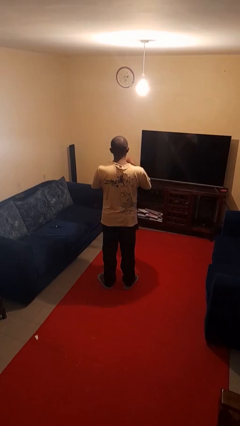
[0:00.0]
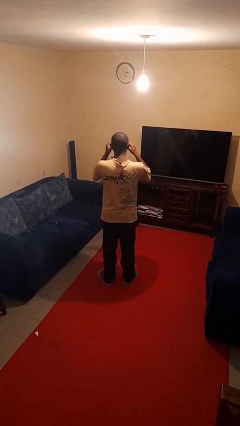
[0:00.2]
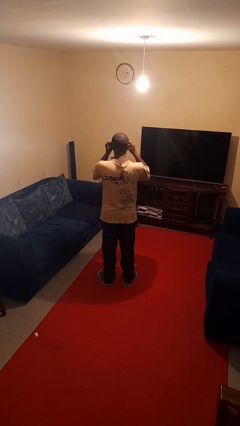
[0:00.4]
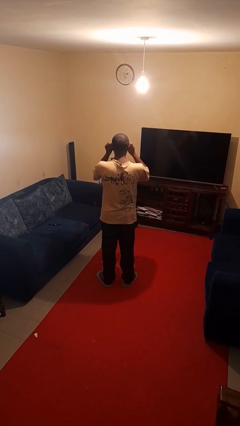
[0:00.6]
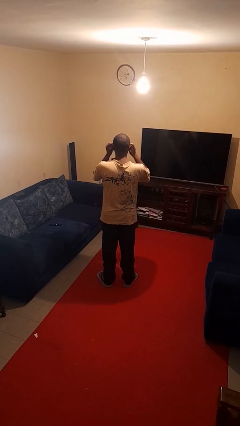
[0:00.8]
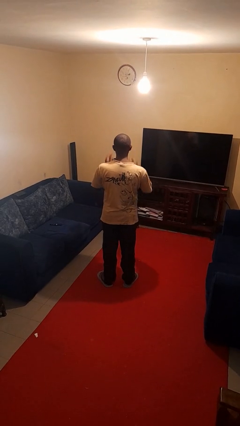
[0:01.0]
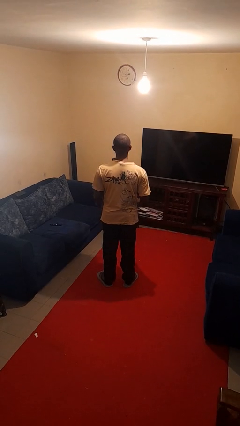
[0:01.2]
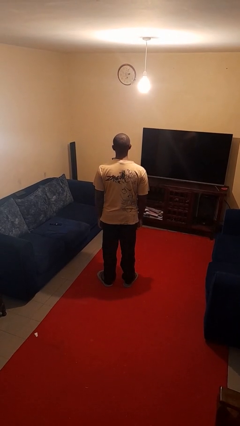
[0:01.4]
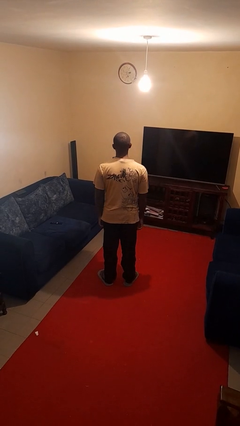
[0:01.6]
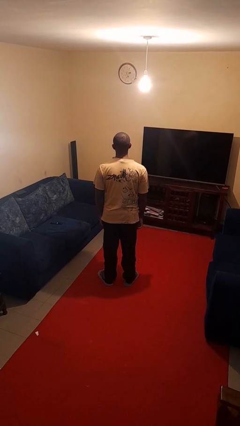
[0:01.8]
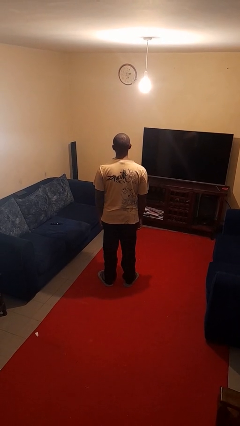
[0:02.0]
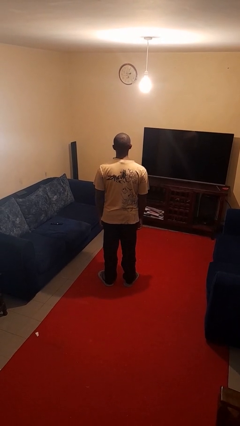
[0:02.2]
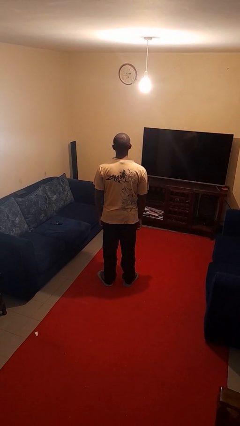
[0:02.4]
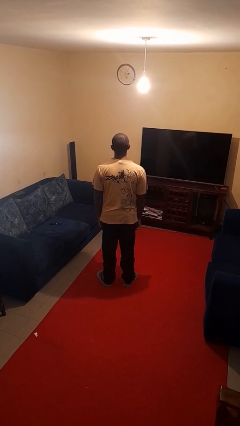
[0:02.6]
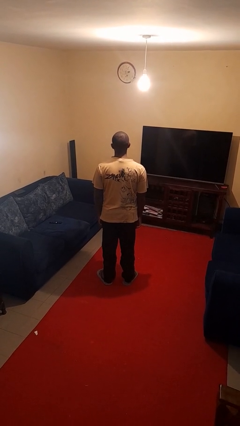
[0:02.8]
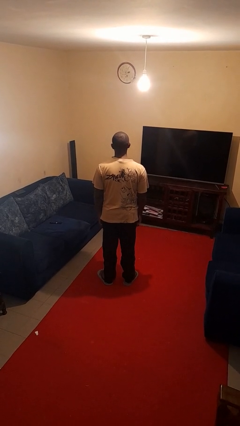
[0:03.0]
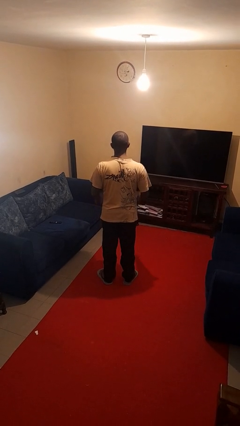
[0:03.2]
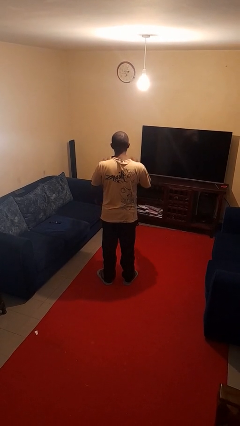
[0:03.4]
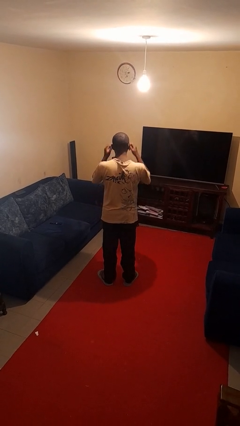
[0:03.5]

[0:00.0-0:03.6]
person puts on sunglasses

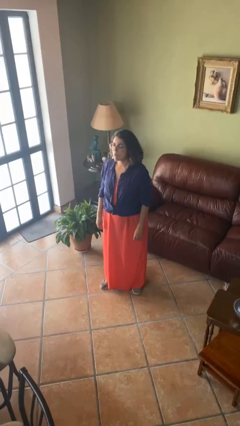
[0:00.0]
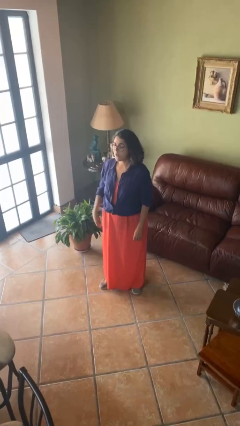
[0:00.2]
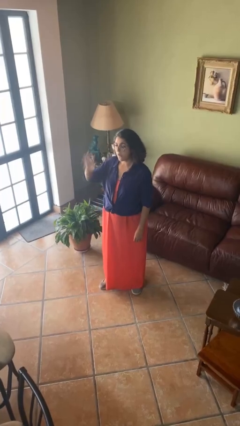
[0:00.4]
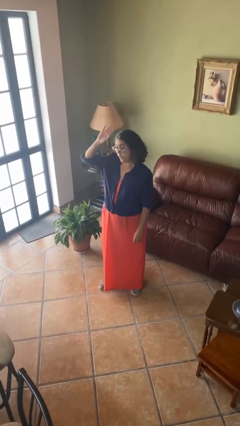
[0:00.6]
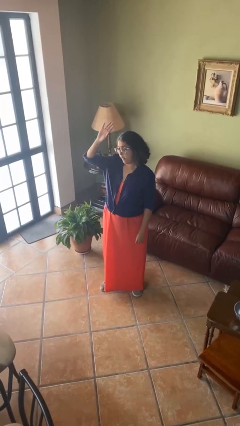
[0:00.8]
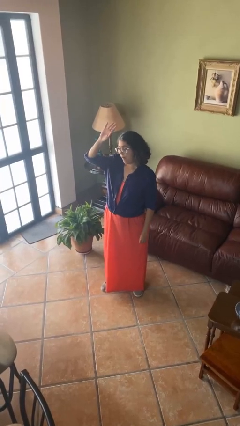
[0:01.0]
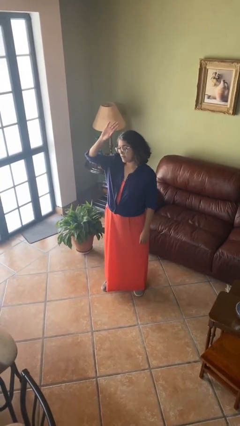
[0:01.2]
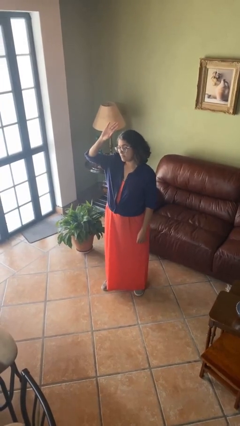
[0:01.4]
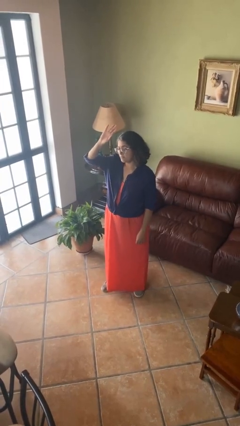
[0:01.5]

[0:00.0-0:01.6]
person gestures raise hand

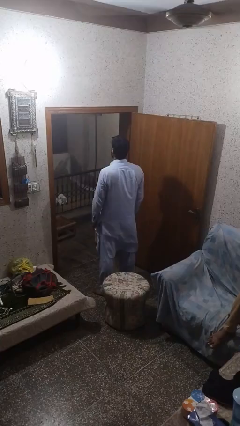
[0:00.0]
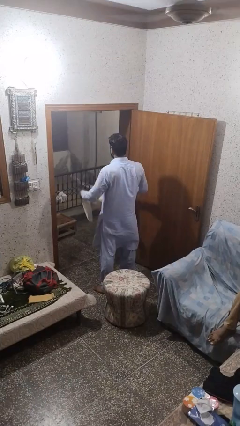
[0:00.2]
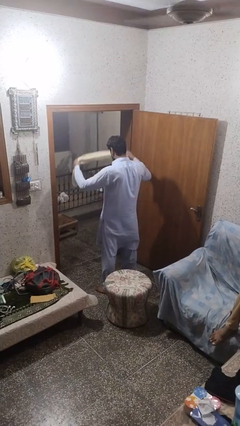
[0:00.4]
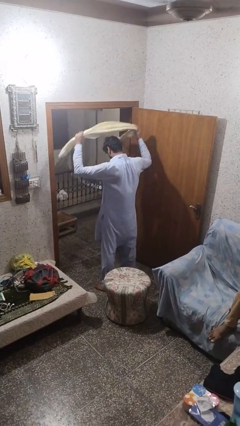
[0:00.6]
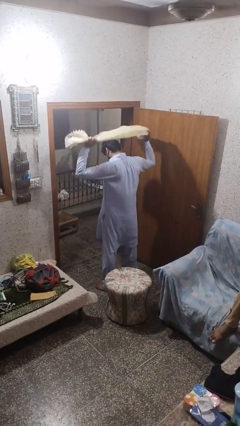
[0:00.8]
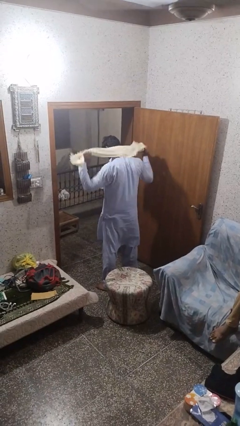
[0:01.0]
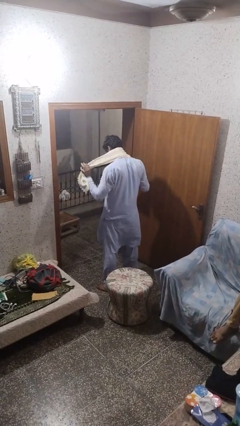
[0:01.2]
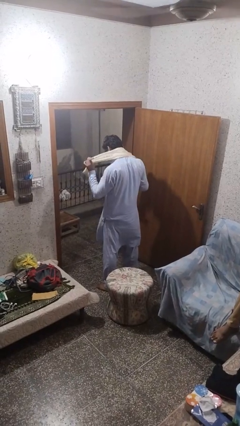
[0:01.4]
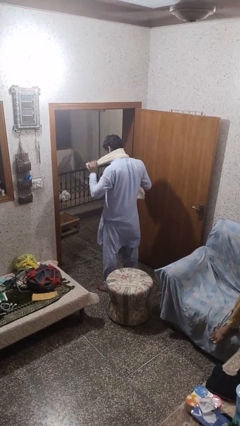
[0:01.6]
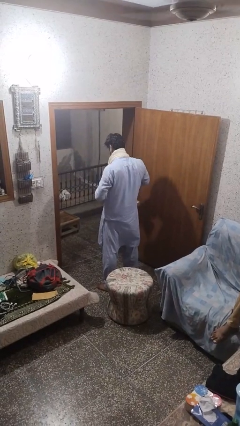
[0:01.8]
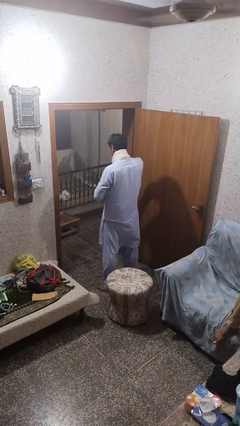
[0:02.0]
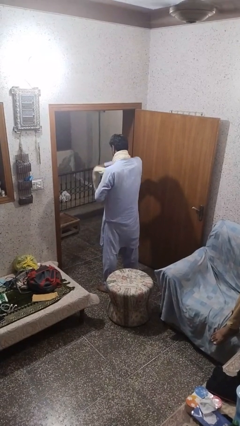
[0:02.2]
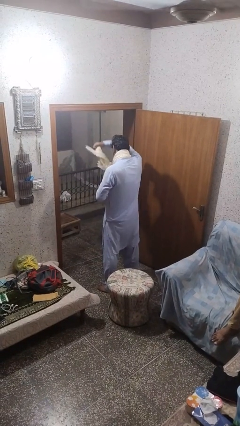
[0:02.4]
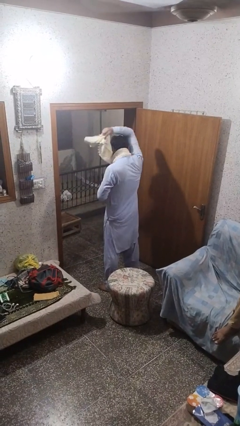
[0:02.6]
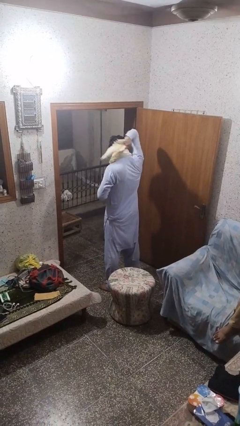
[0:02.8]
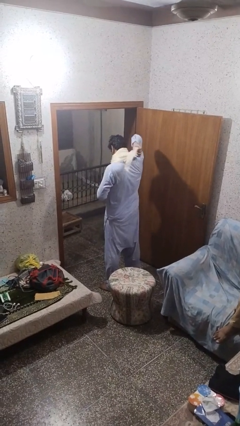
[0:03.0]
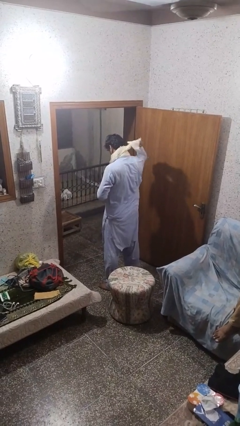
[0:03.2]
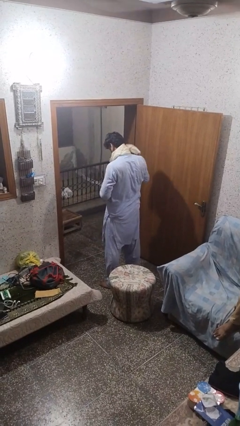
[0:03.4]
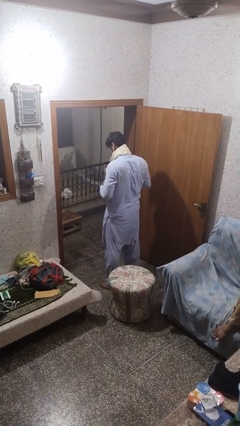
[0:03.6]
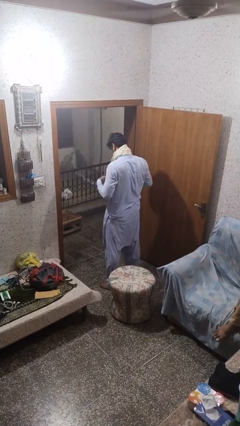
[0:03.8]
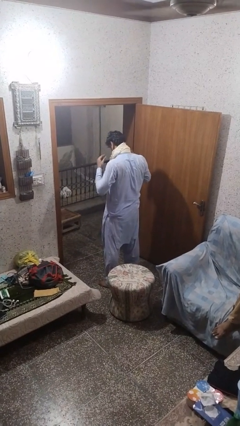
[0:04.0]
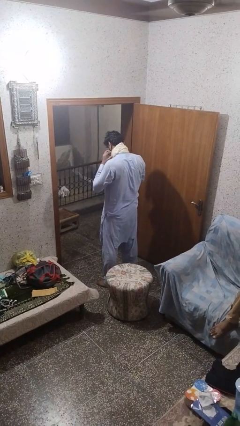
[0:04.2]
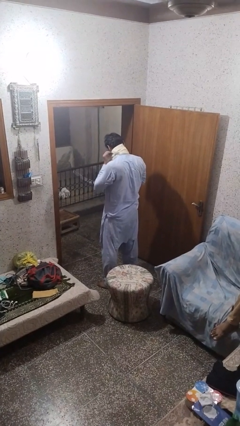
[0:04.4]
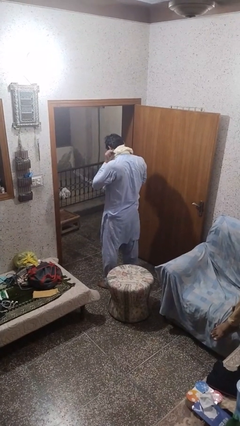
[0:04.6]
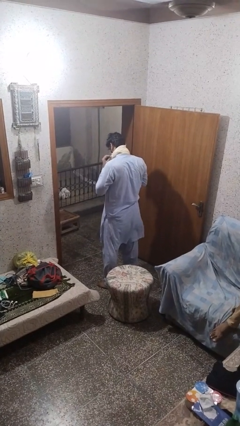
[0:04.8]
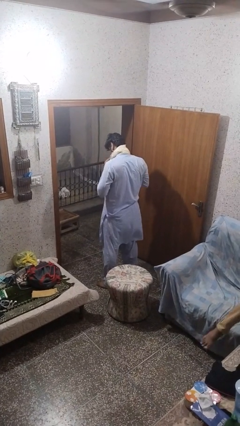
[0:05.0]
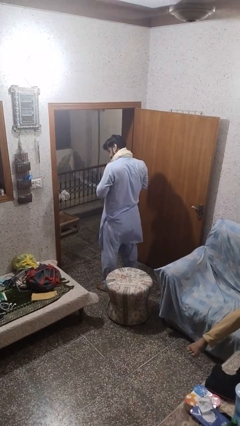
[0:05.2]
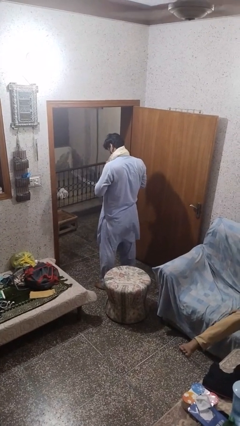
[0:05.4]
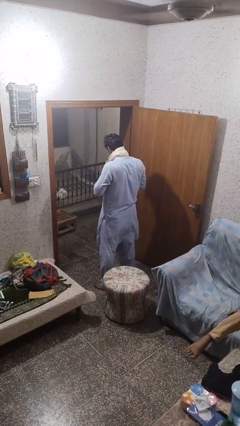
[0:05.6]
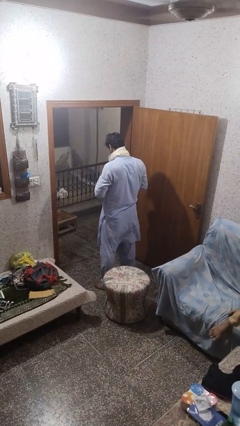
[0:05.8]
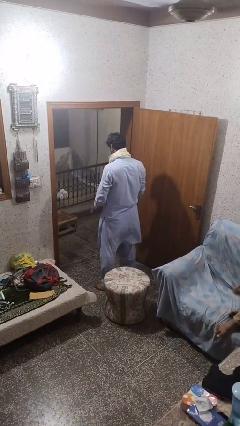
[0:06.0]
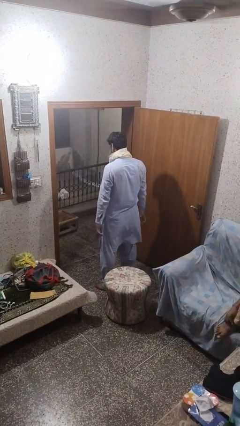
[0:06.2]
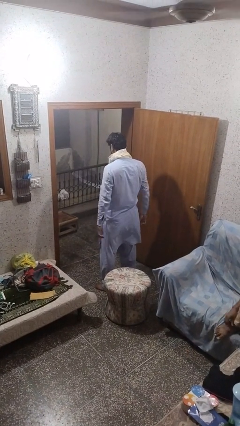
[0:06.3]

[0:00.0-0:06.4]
person puts on scarf

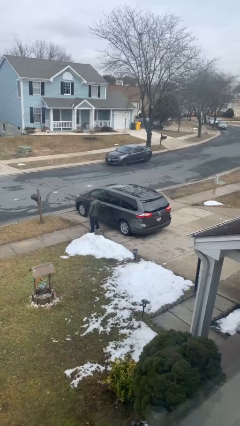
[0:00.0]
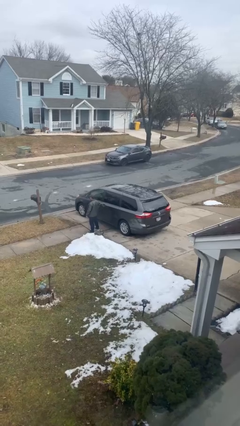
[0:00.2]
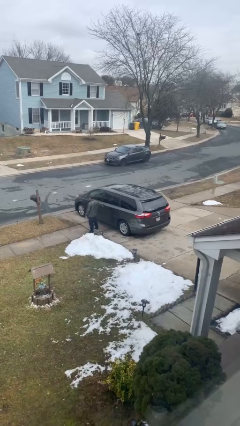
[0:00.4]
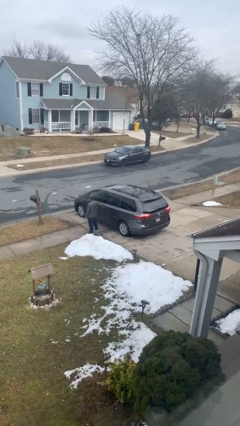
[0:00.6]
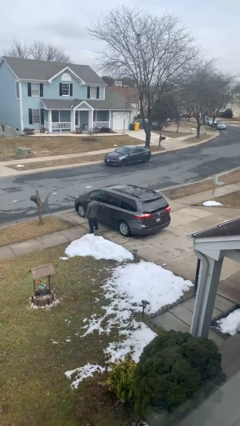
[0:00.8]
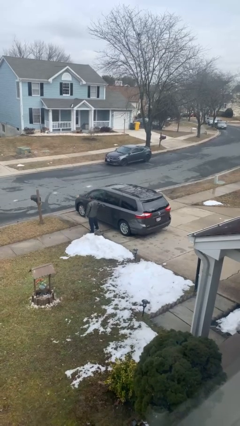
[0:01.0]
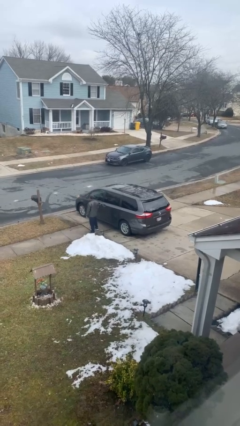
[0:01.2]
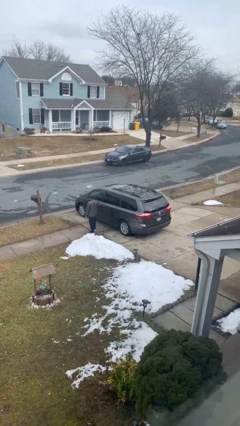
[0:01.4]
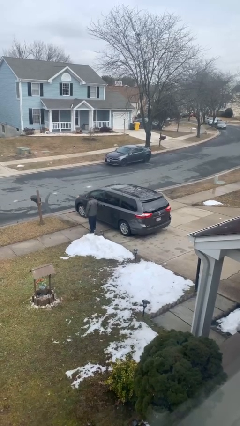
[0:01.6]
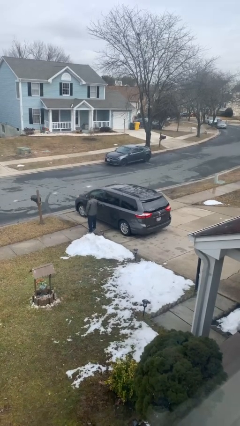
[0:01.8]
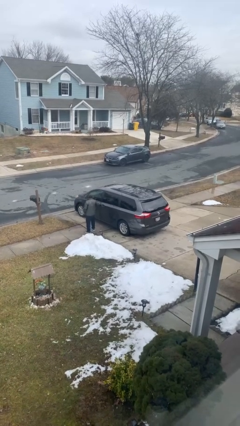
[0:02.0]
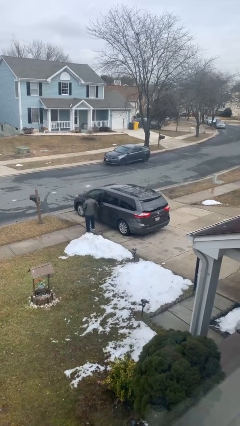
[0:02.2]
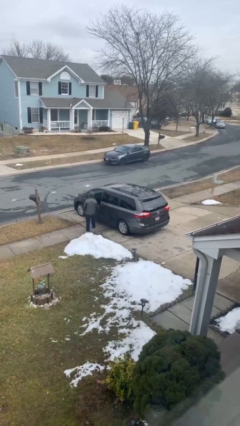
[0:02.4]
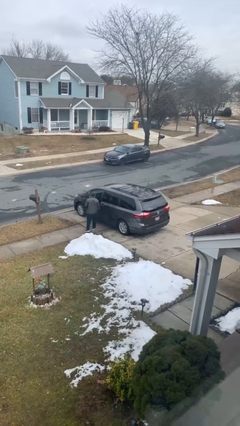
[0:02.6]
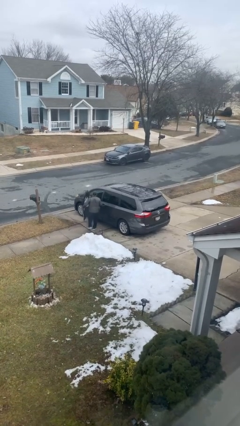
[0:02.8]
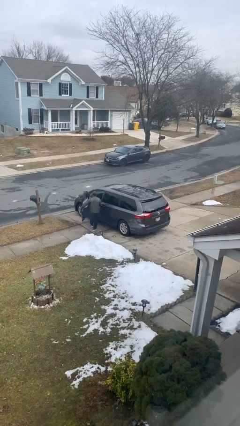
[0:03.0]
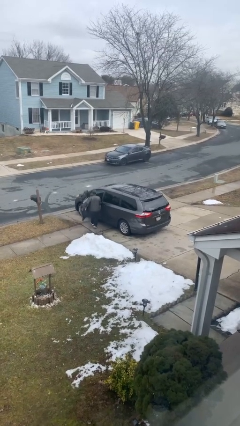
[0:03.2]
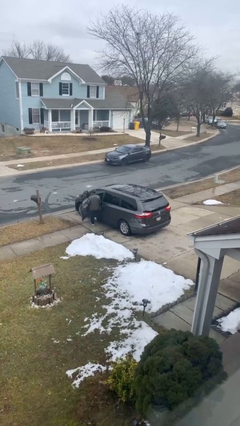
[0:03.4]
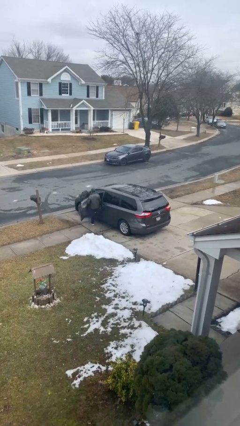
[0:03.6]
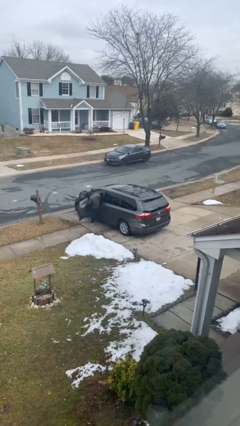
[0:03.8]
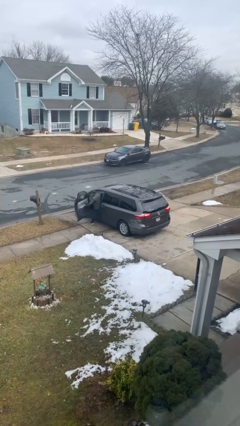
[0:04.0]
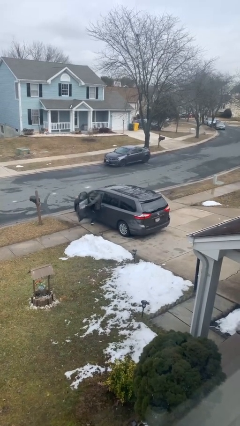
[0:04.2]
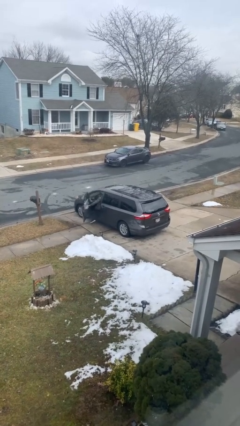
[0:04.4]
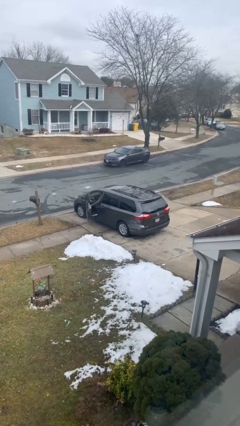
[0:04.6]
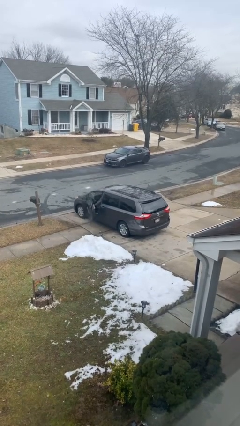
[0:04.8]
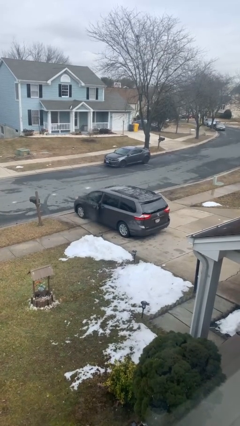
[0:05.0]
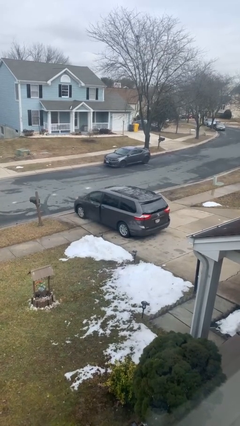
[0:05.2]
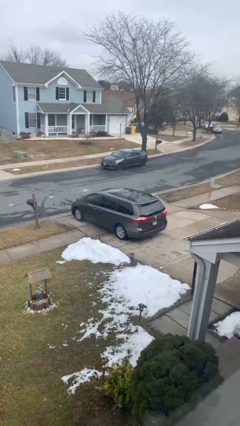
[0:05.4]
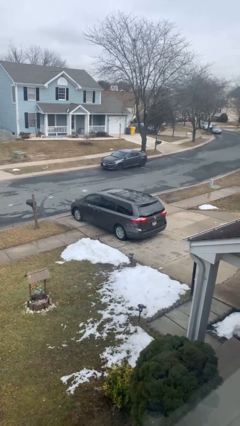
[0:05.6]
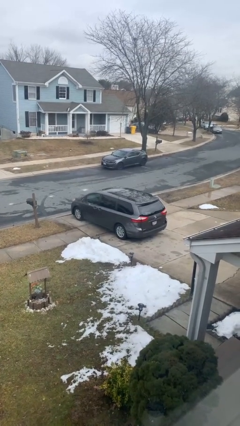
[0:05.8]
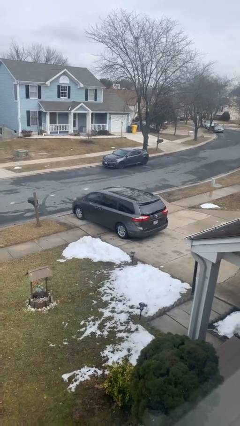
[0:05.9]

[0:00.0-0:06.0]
car picks up person

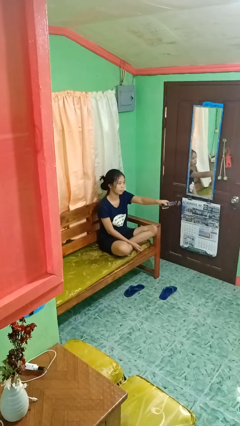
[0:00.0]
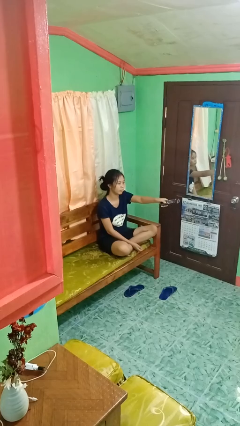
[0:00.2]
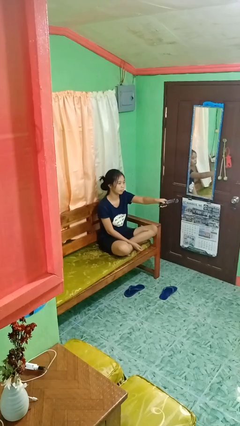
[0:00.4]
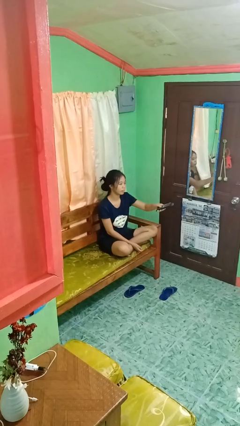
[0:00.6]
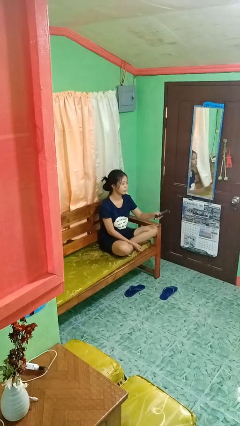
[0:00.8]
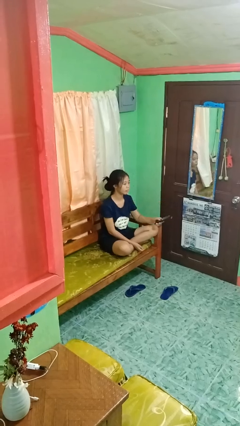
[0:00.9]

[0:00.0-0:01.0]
person uses television remote
